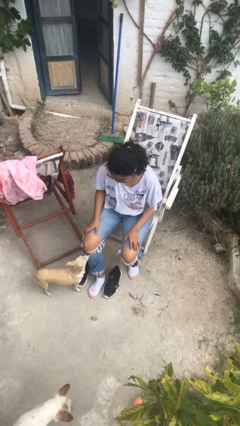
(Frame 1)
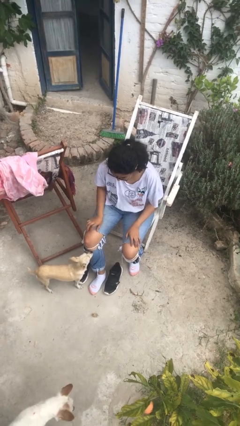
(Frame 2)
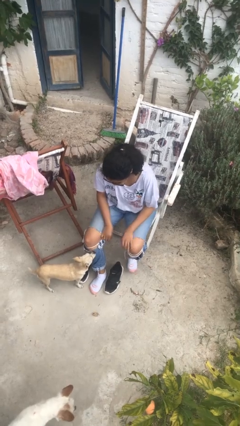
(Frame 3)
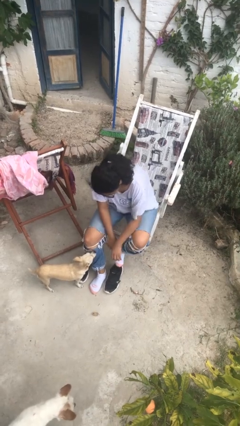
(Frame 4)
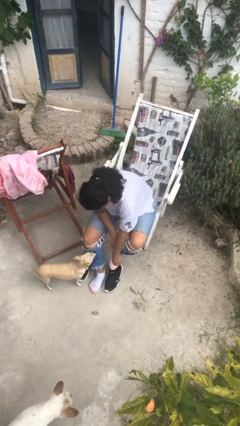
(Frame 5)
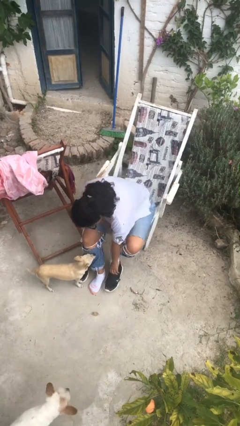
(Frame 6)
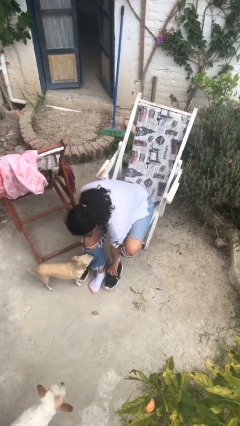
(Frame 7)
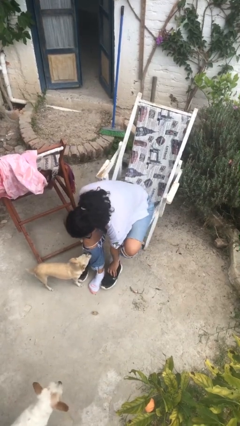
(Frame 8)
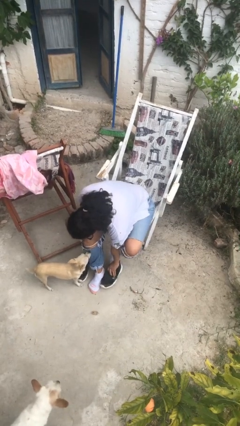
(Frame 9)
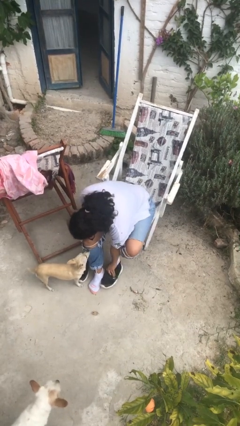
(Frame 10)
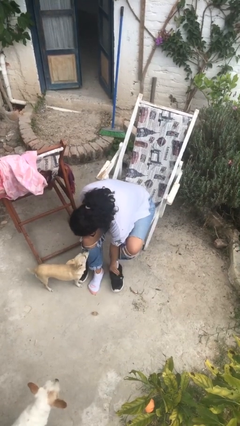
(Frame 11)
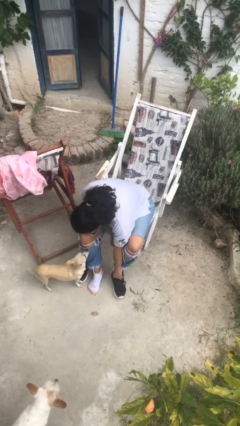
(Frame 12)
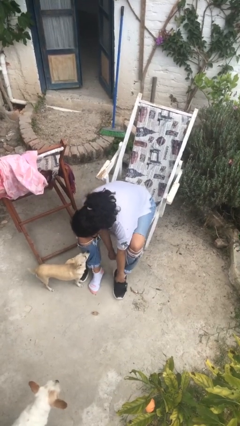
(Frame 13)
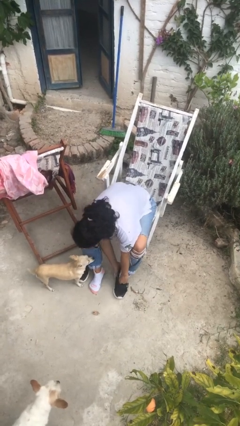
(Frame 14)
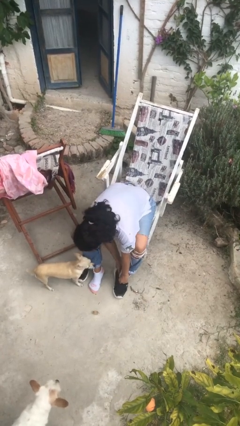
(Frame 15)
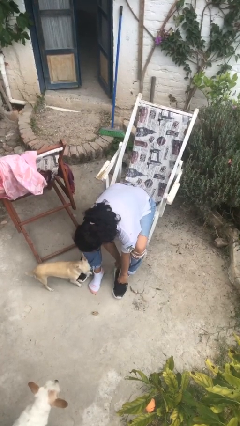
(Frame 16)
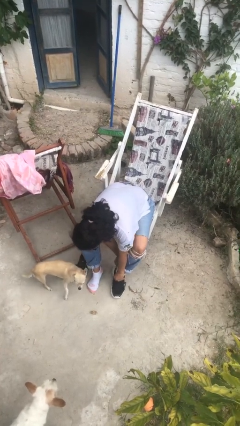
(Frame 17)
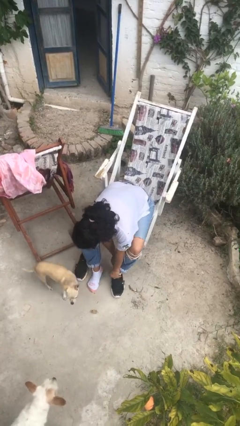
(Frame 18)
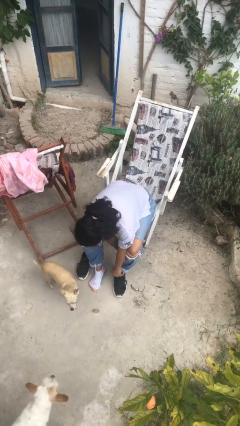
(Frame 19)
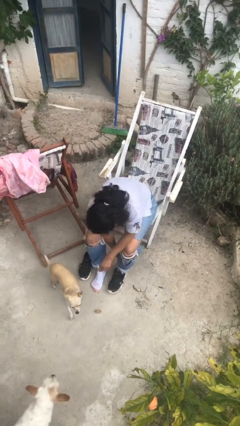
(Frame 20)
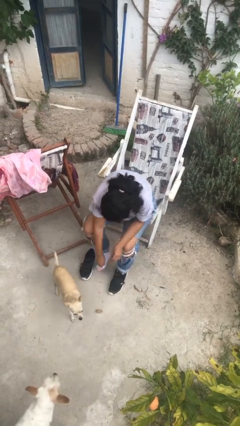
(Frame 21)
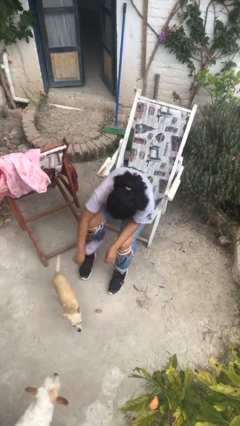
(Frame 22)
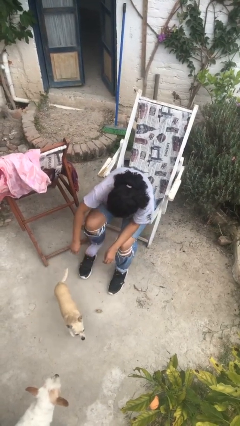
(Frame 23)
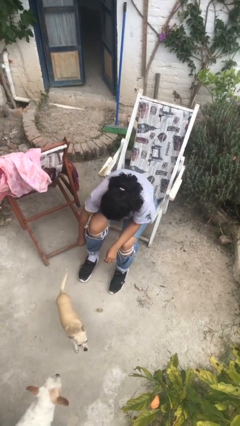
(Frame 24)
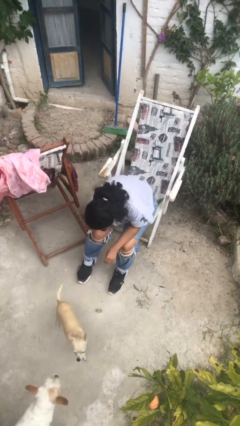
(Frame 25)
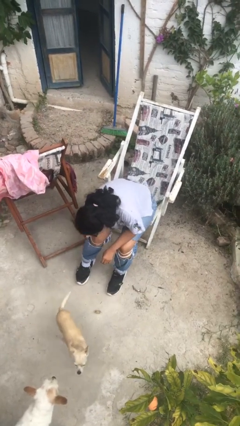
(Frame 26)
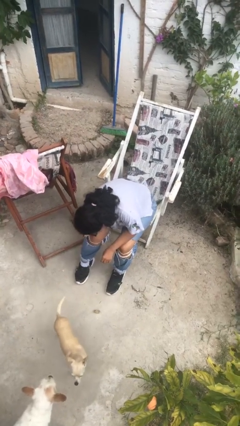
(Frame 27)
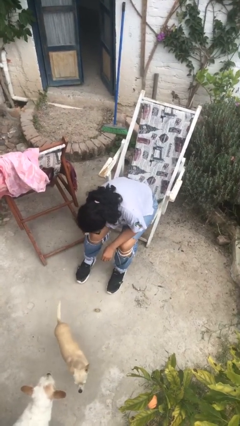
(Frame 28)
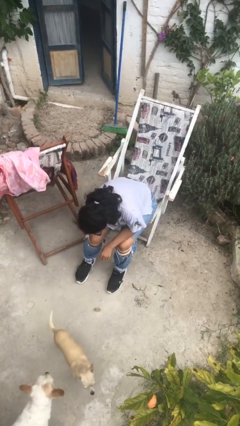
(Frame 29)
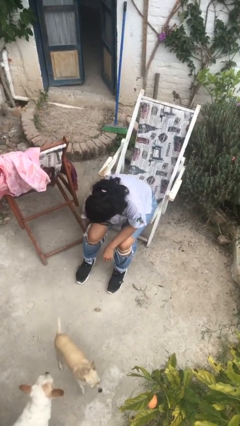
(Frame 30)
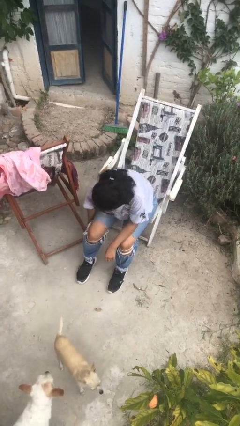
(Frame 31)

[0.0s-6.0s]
person puts on shoes

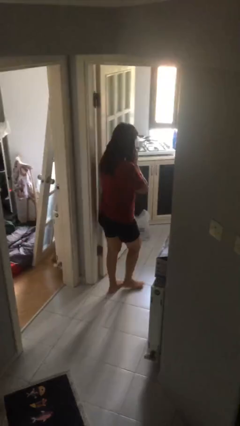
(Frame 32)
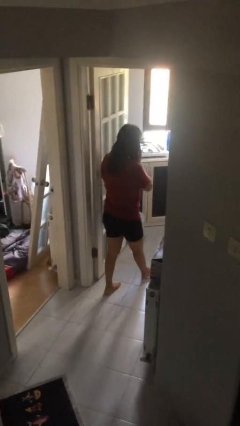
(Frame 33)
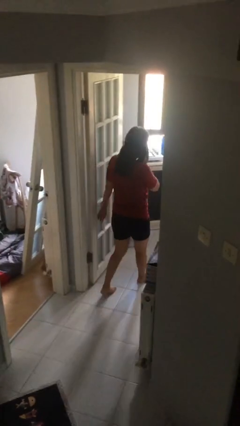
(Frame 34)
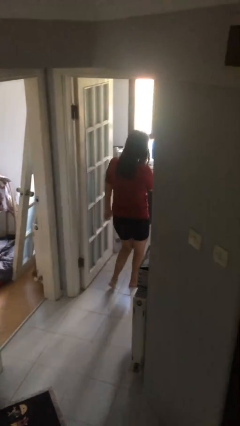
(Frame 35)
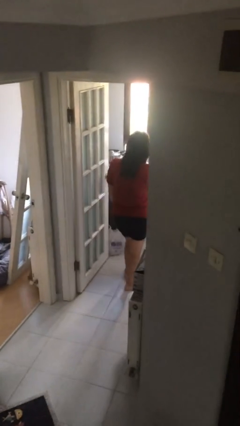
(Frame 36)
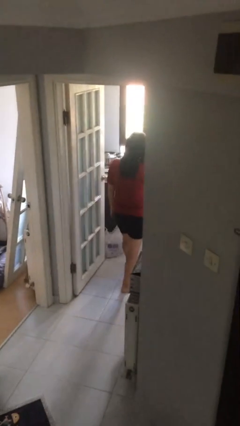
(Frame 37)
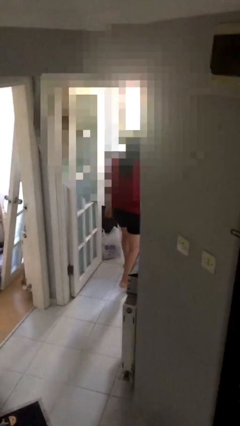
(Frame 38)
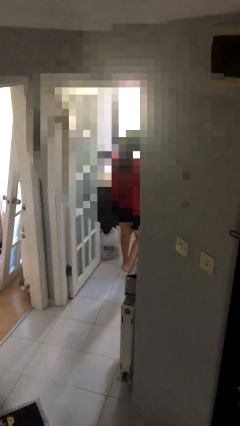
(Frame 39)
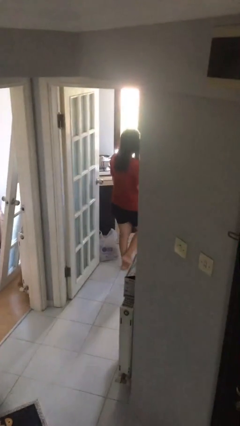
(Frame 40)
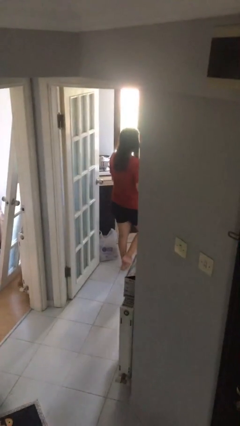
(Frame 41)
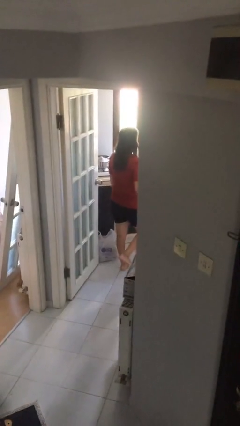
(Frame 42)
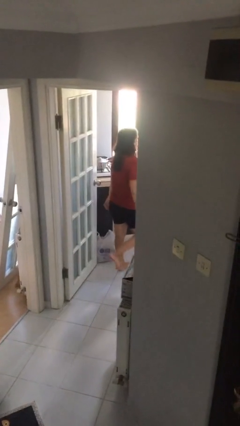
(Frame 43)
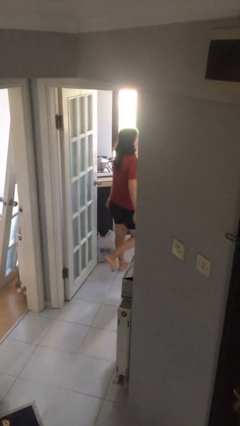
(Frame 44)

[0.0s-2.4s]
person exits scene through structure

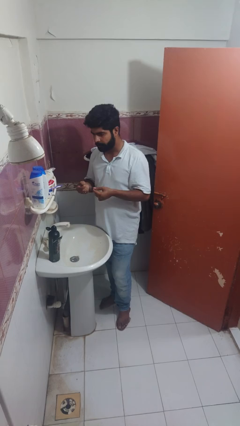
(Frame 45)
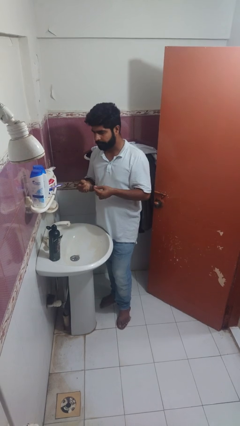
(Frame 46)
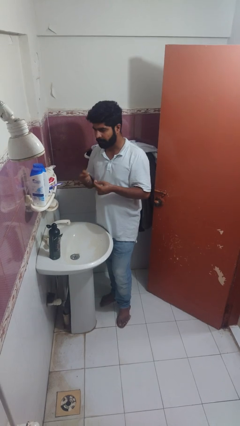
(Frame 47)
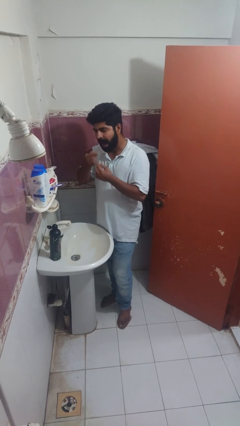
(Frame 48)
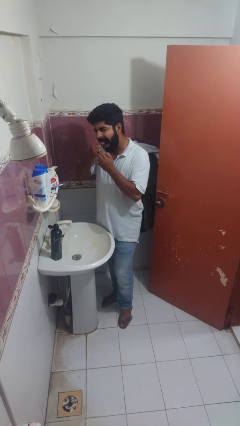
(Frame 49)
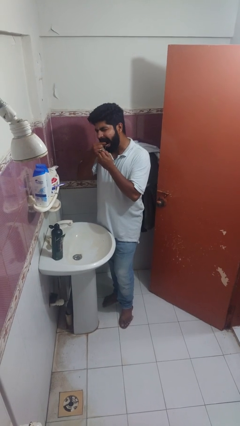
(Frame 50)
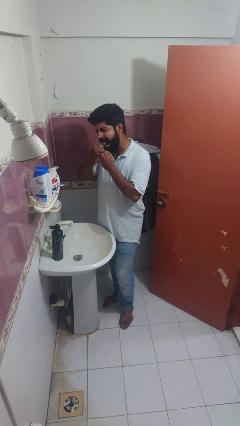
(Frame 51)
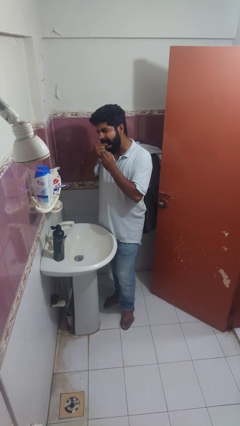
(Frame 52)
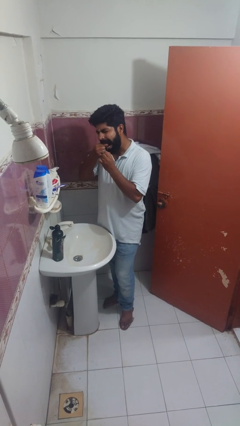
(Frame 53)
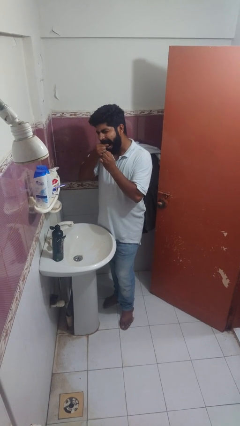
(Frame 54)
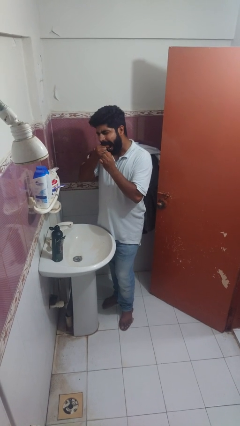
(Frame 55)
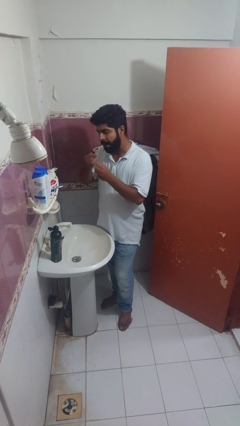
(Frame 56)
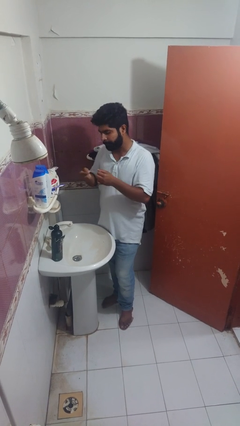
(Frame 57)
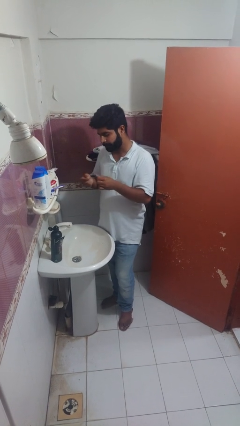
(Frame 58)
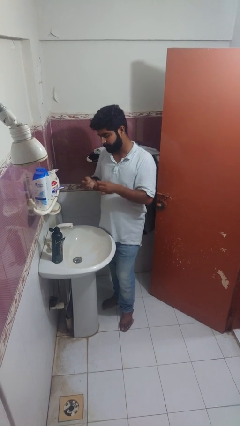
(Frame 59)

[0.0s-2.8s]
person flosses

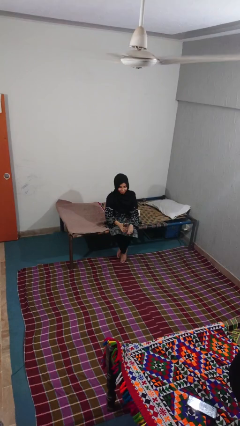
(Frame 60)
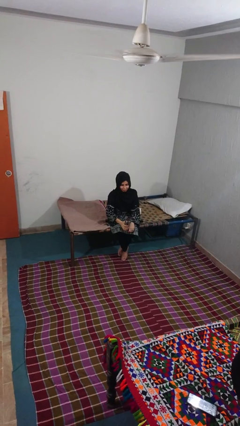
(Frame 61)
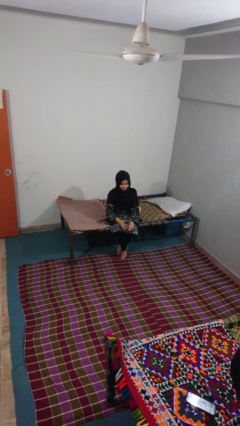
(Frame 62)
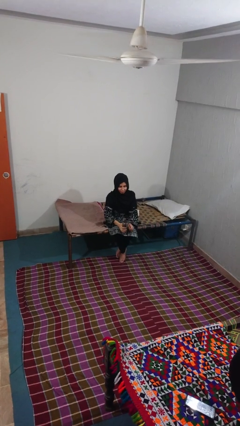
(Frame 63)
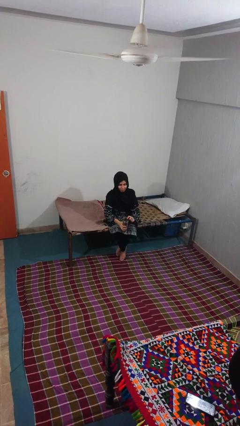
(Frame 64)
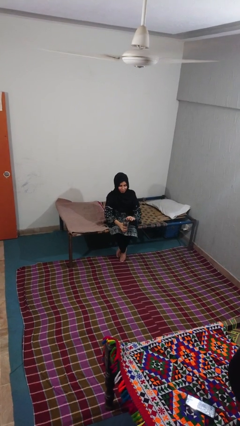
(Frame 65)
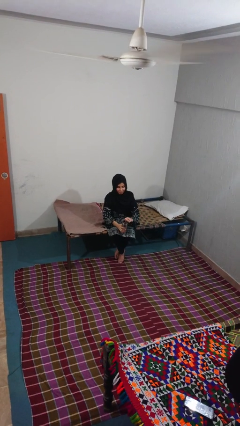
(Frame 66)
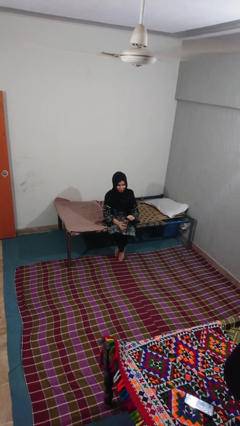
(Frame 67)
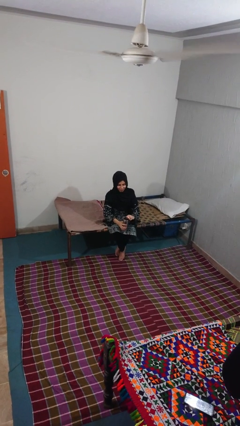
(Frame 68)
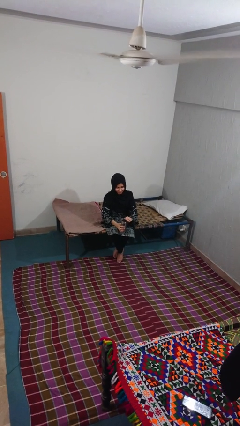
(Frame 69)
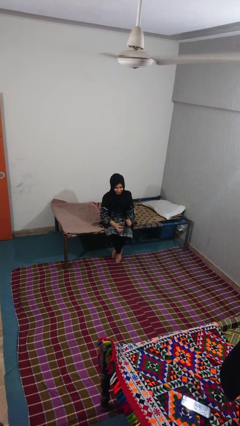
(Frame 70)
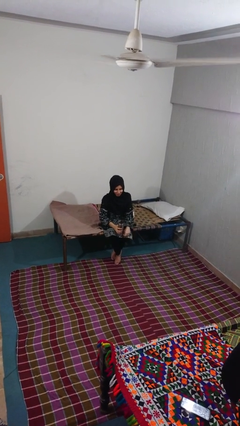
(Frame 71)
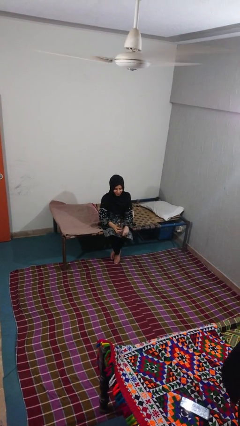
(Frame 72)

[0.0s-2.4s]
person opens beverage can

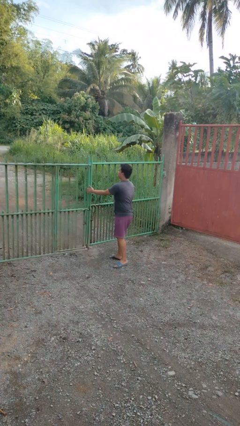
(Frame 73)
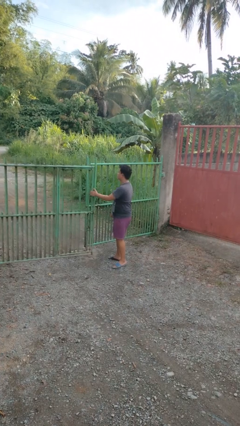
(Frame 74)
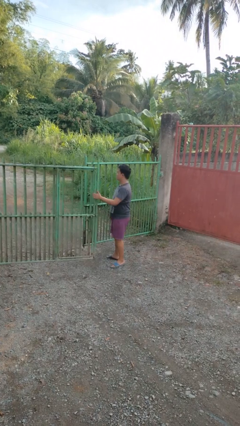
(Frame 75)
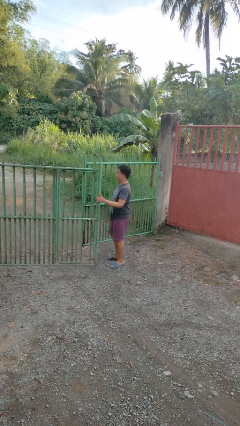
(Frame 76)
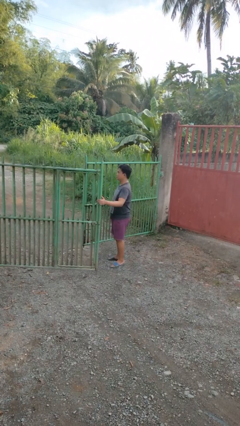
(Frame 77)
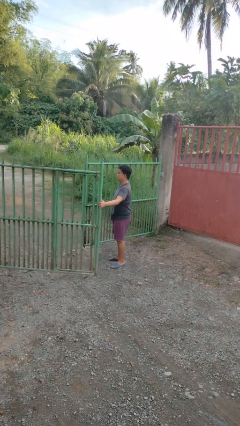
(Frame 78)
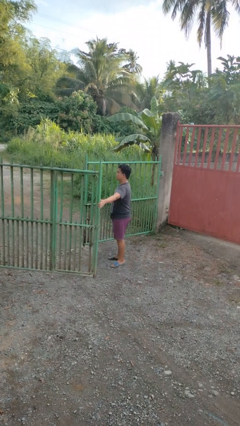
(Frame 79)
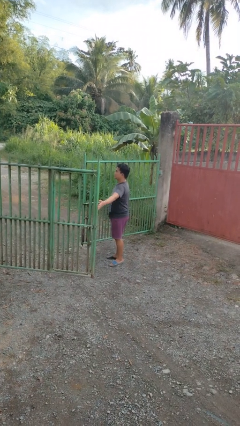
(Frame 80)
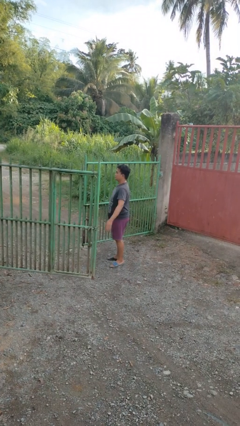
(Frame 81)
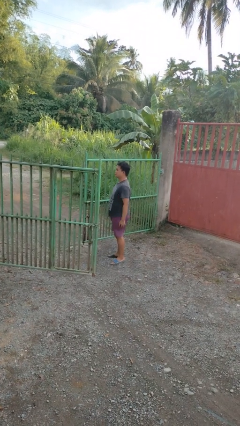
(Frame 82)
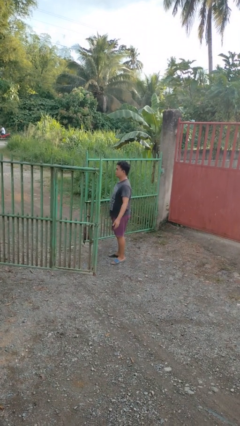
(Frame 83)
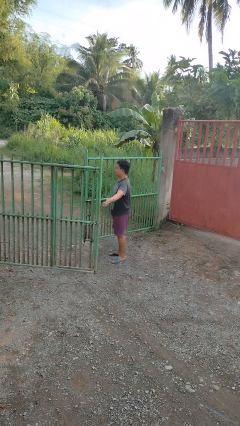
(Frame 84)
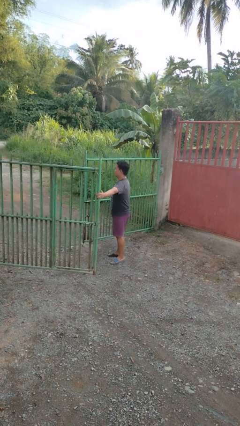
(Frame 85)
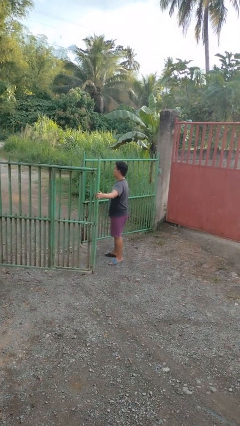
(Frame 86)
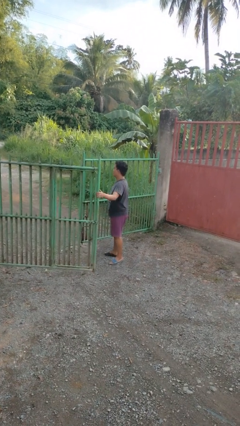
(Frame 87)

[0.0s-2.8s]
person opens gate

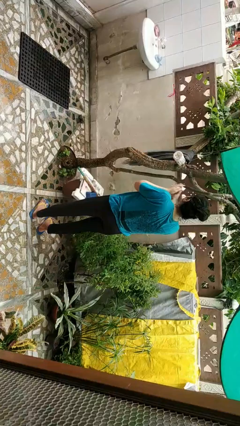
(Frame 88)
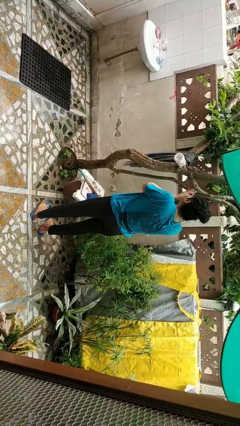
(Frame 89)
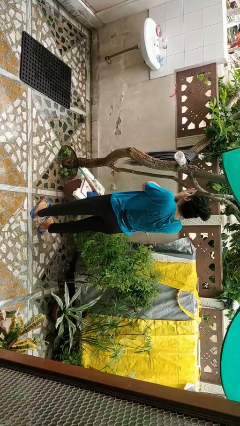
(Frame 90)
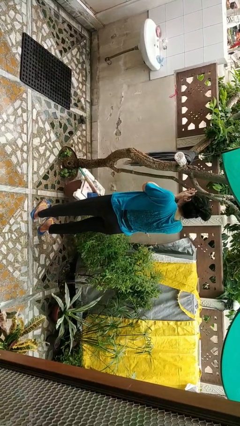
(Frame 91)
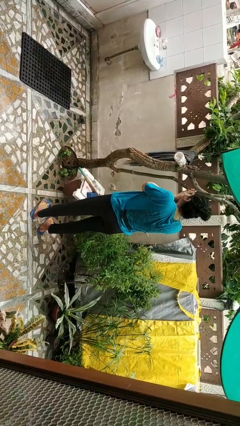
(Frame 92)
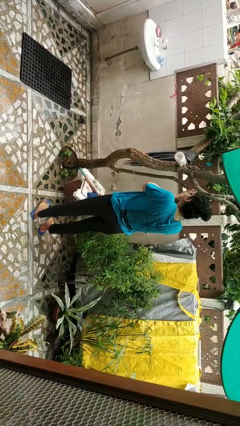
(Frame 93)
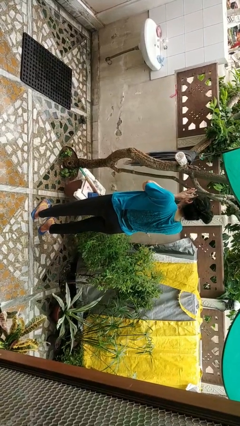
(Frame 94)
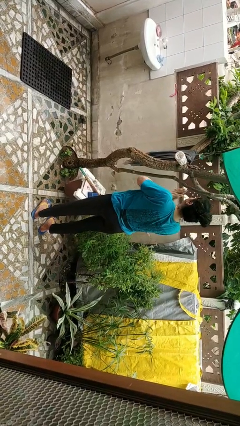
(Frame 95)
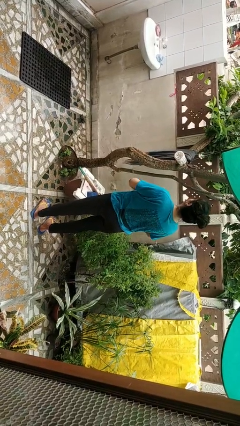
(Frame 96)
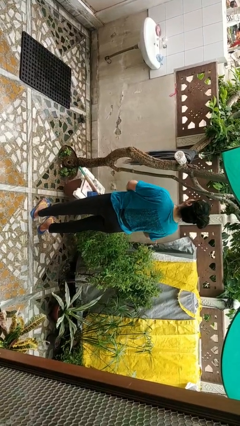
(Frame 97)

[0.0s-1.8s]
person blows into hands
